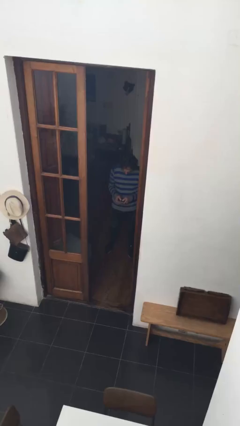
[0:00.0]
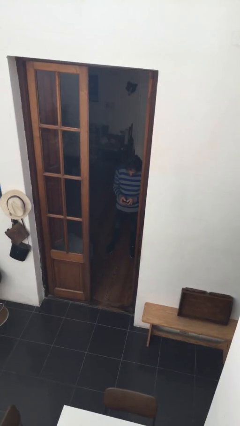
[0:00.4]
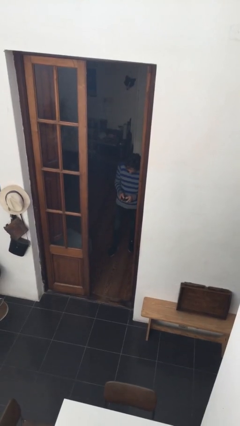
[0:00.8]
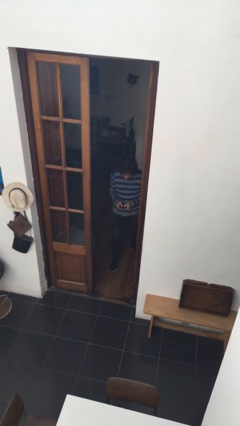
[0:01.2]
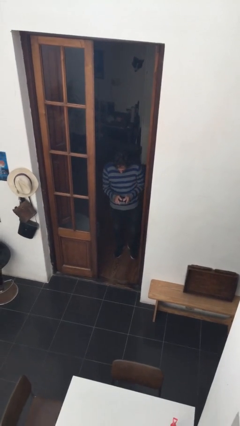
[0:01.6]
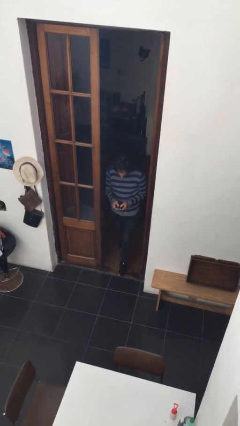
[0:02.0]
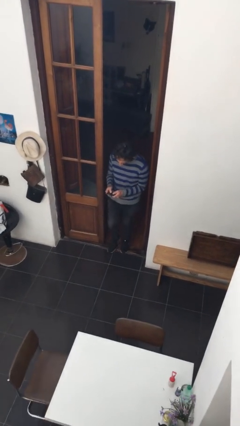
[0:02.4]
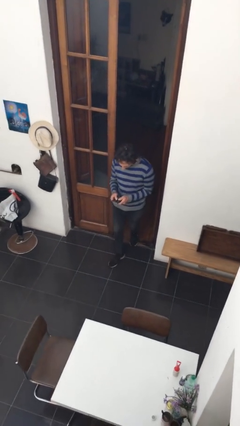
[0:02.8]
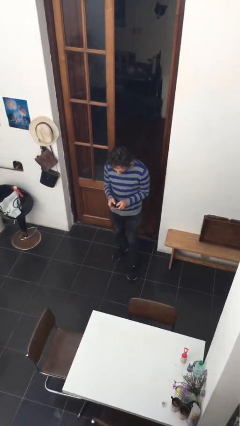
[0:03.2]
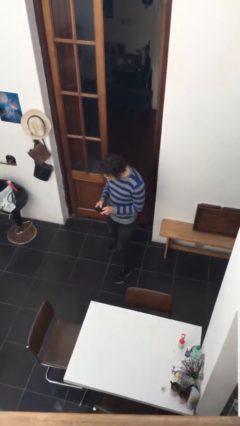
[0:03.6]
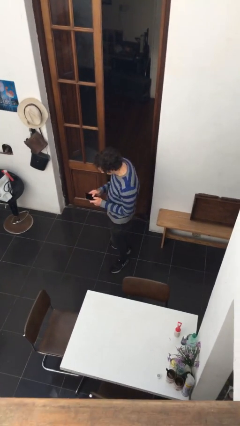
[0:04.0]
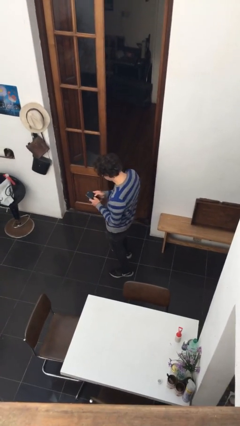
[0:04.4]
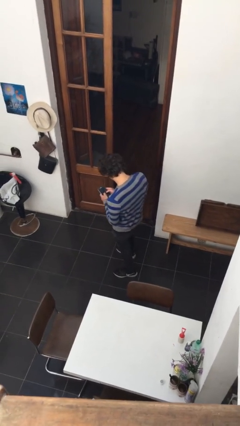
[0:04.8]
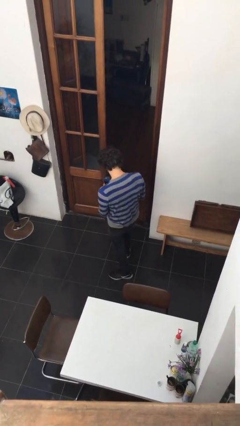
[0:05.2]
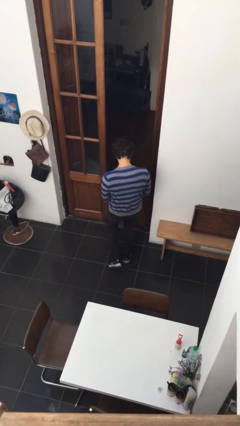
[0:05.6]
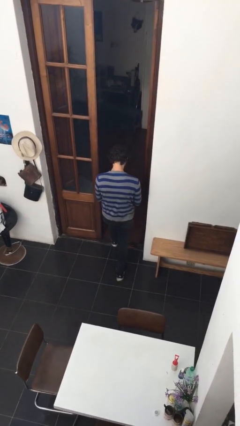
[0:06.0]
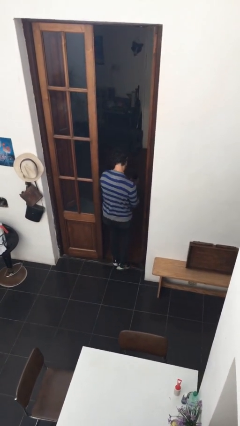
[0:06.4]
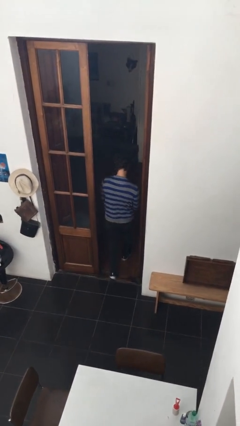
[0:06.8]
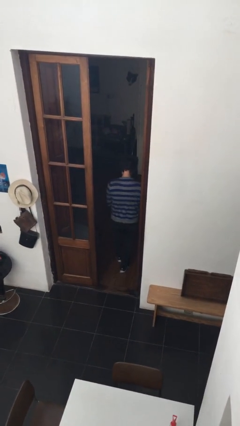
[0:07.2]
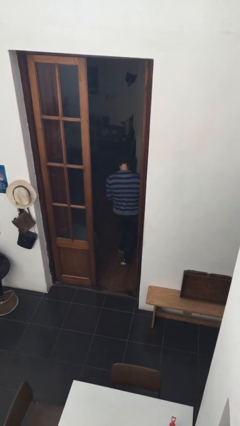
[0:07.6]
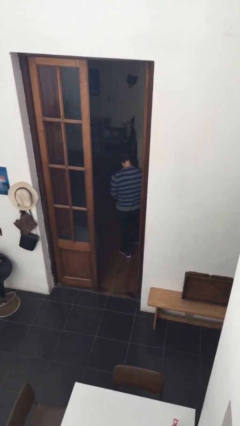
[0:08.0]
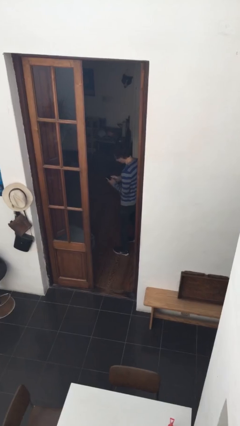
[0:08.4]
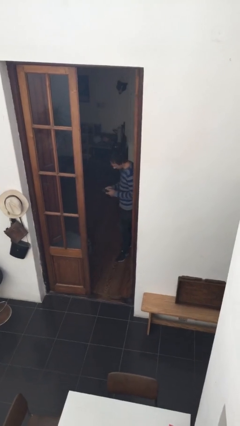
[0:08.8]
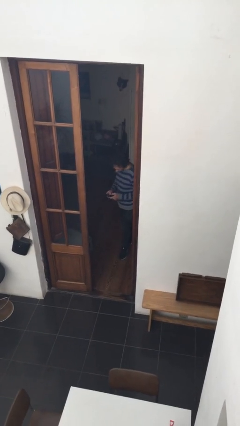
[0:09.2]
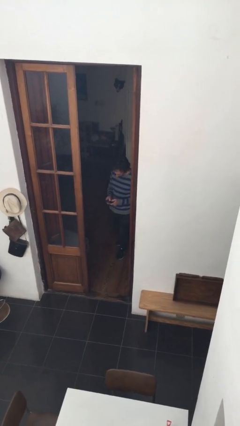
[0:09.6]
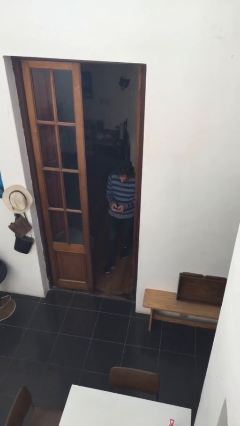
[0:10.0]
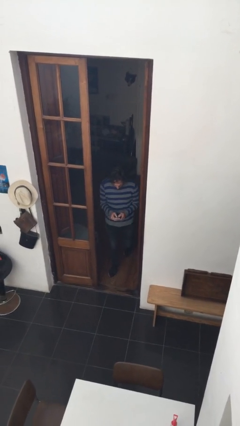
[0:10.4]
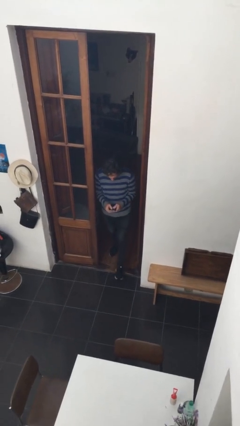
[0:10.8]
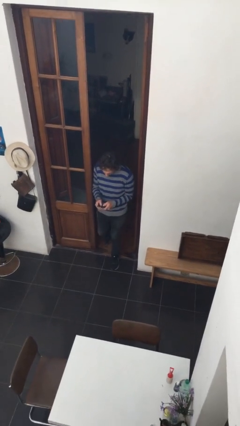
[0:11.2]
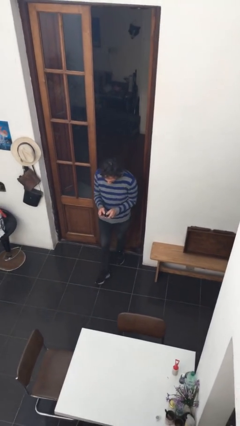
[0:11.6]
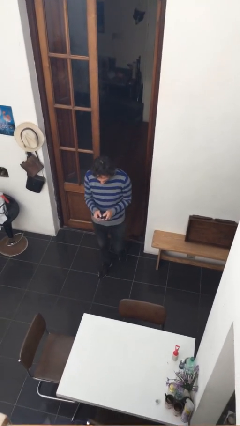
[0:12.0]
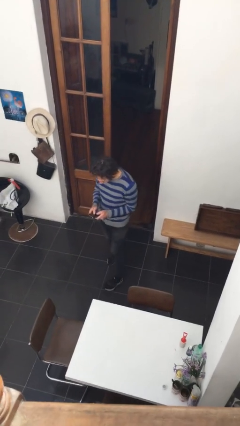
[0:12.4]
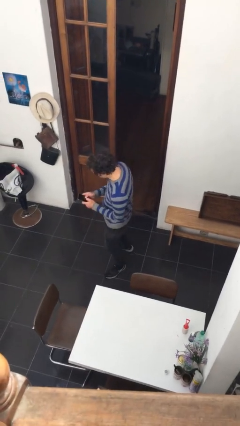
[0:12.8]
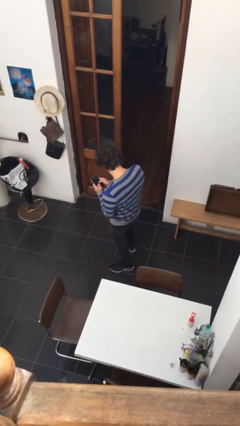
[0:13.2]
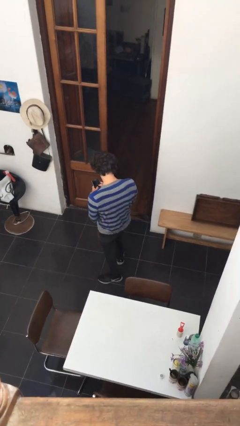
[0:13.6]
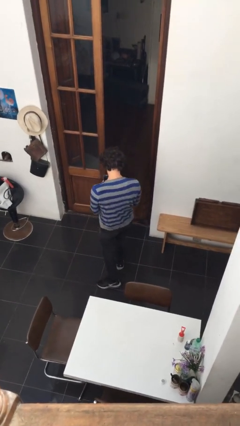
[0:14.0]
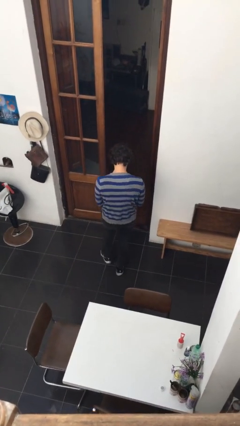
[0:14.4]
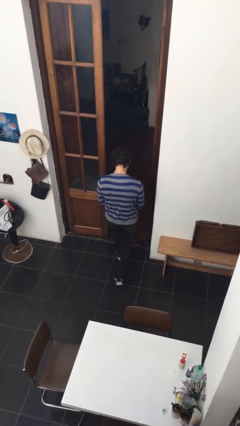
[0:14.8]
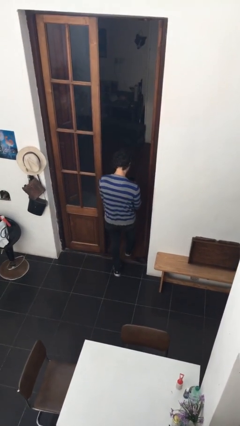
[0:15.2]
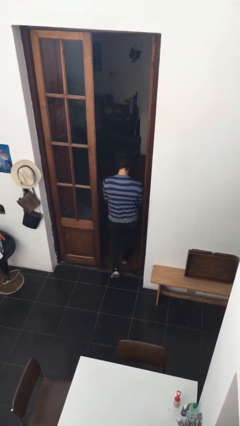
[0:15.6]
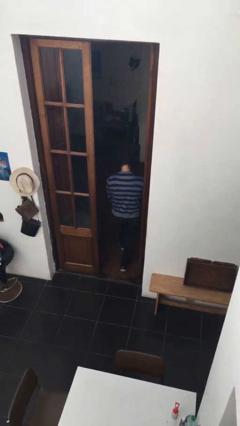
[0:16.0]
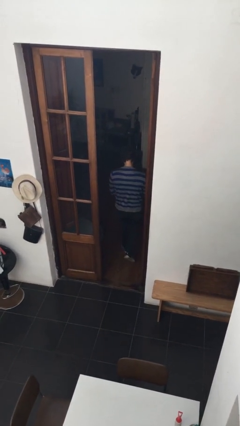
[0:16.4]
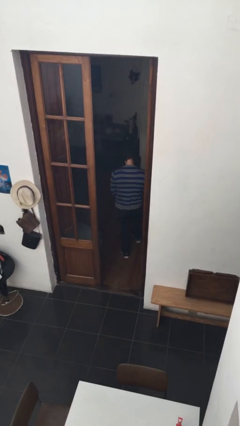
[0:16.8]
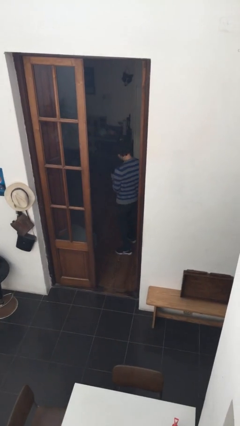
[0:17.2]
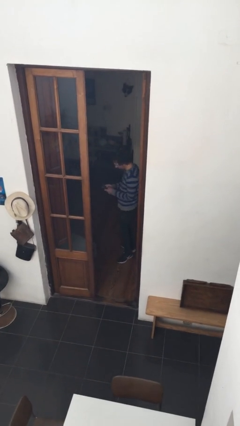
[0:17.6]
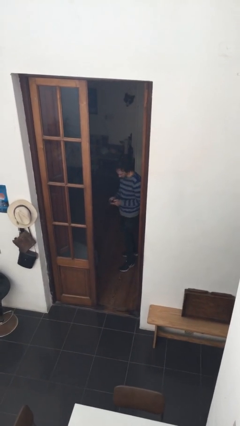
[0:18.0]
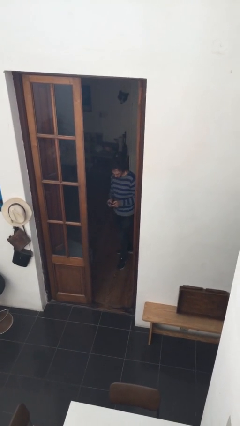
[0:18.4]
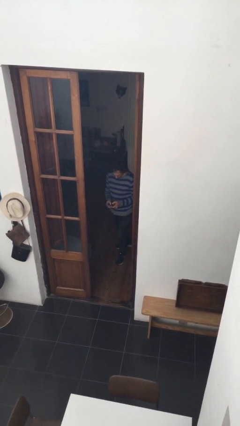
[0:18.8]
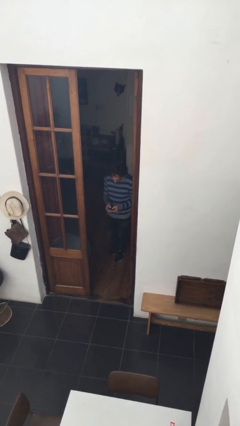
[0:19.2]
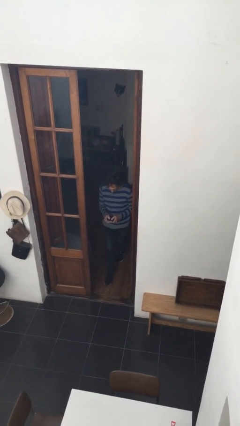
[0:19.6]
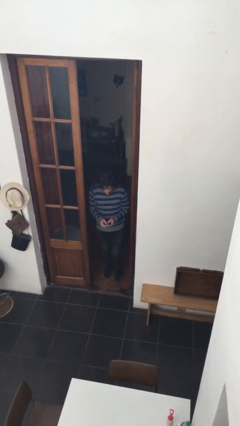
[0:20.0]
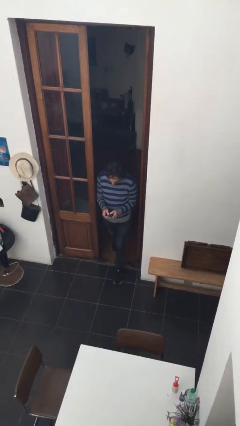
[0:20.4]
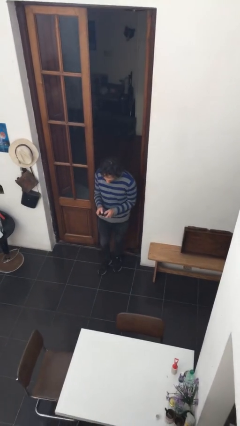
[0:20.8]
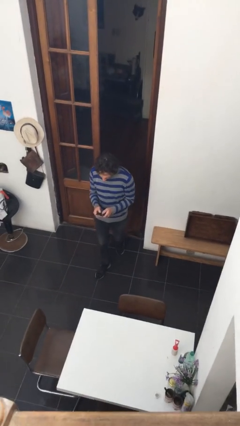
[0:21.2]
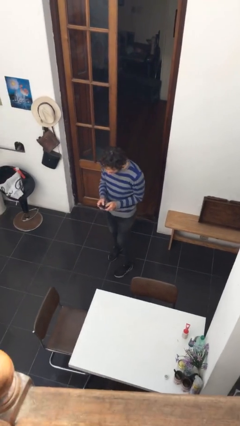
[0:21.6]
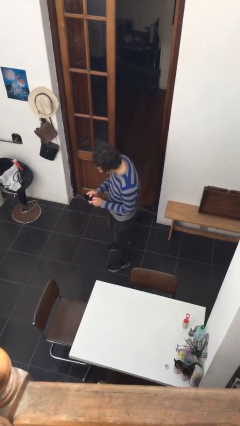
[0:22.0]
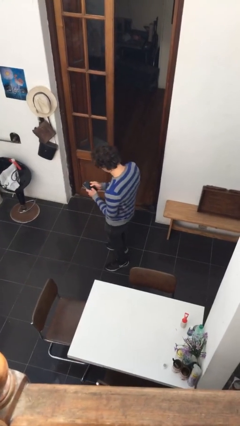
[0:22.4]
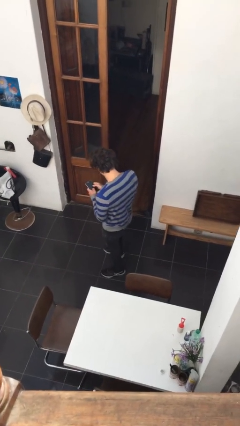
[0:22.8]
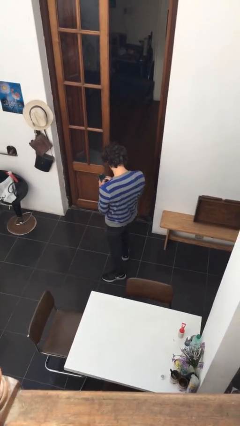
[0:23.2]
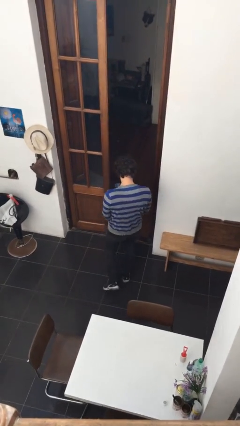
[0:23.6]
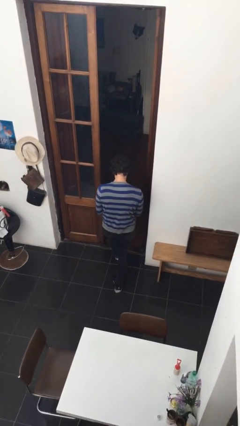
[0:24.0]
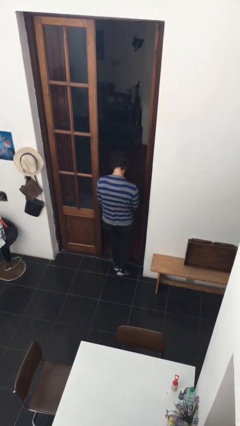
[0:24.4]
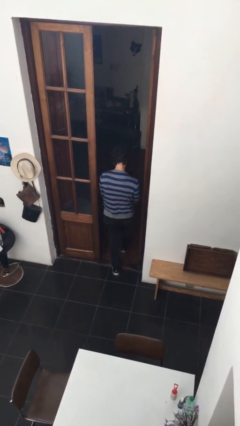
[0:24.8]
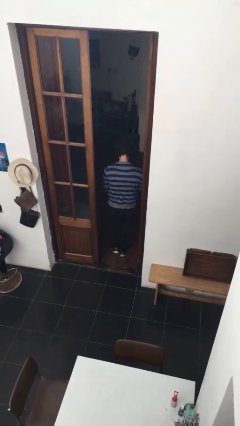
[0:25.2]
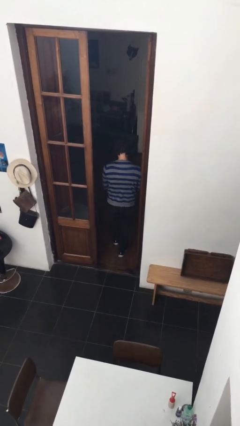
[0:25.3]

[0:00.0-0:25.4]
person texts on phone

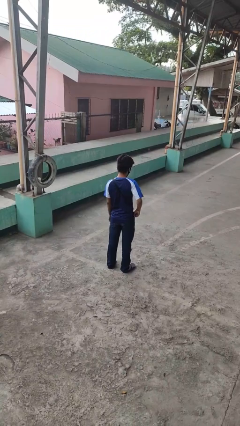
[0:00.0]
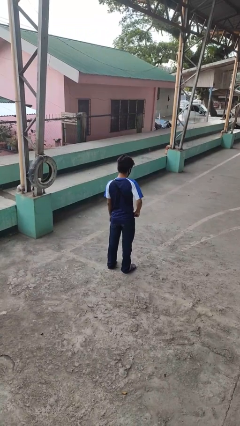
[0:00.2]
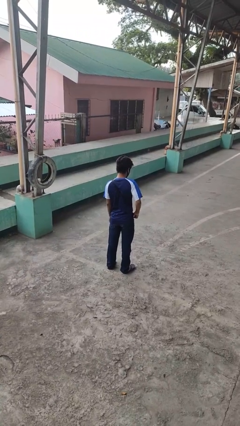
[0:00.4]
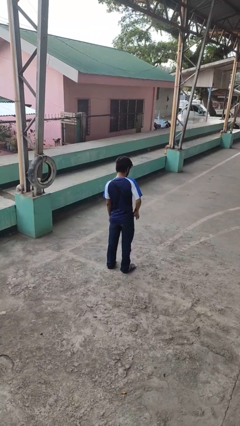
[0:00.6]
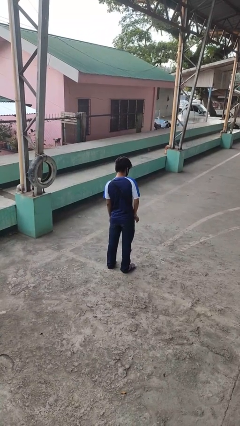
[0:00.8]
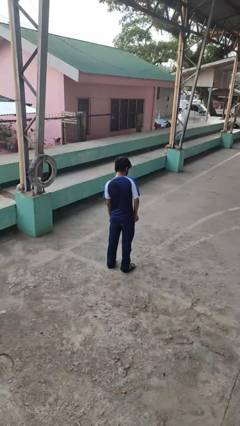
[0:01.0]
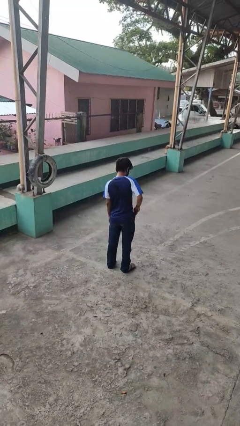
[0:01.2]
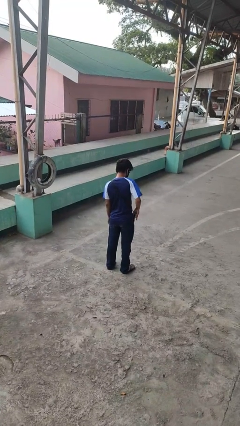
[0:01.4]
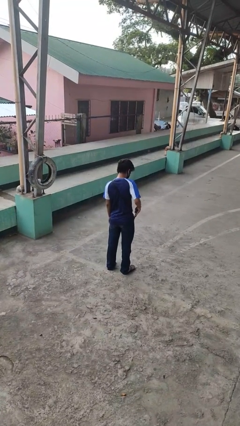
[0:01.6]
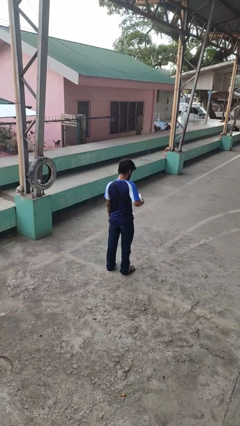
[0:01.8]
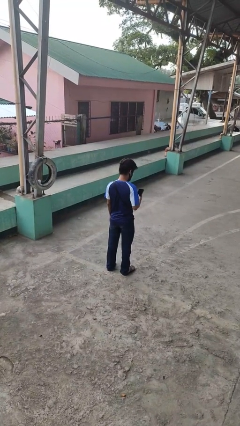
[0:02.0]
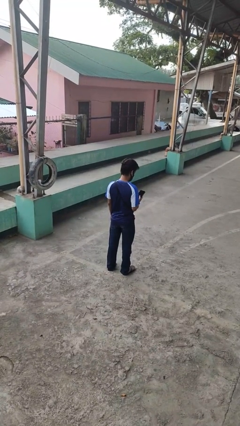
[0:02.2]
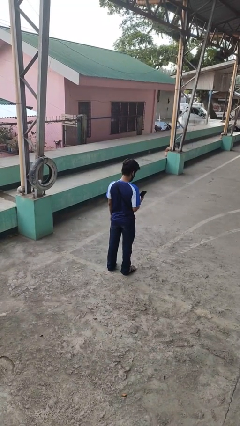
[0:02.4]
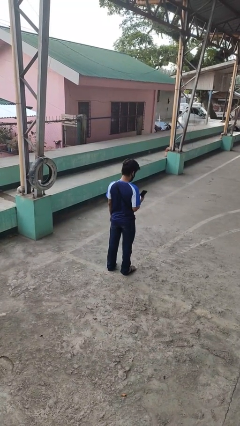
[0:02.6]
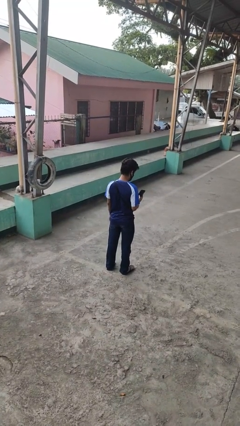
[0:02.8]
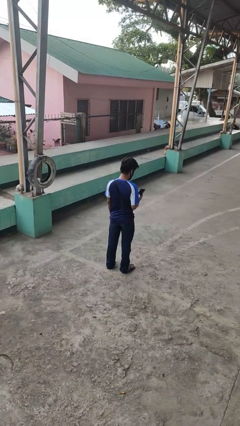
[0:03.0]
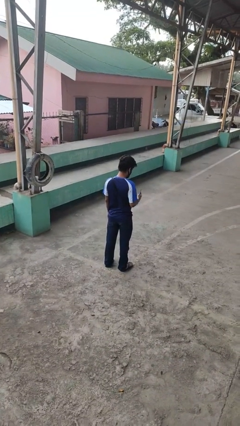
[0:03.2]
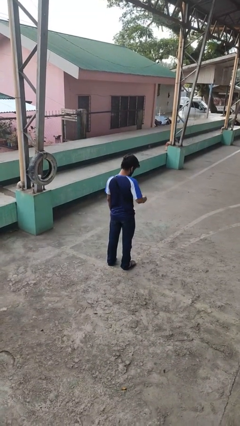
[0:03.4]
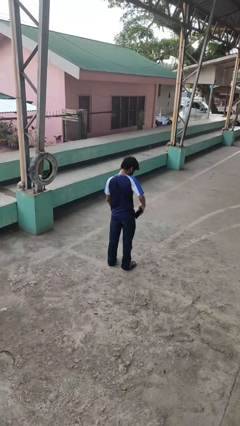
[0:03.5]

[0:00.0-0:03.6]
person takes phone from pocket

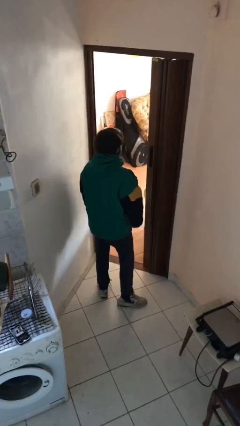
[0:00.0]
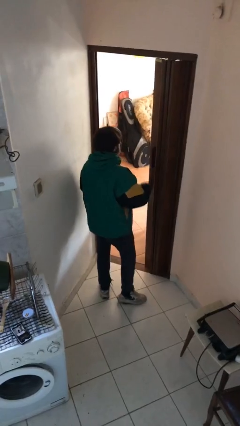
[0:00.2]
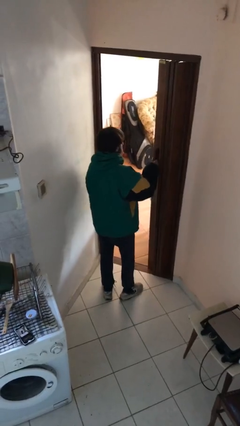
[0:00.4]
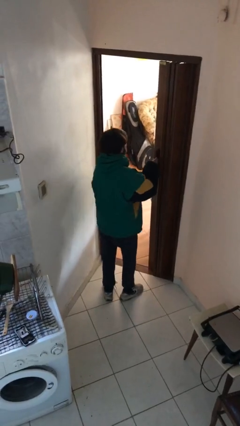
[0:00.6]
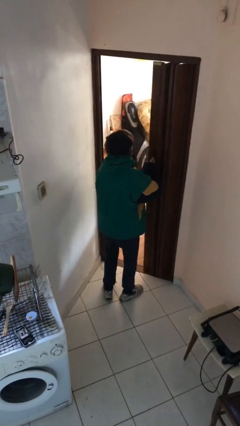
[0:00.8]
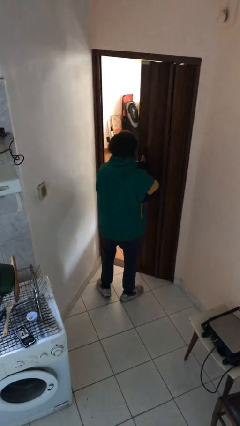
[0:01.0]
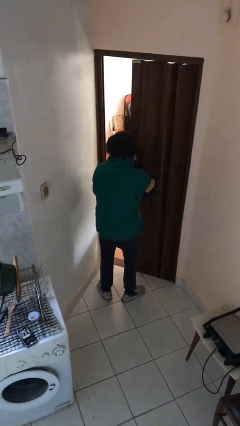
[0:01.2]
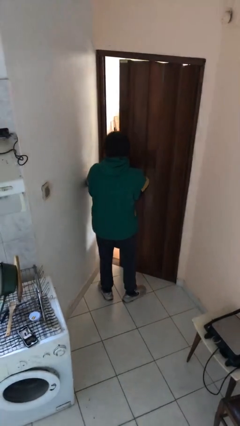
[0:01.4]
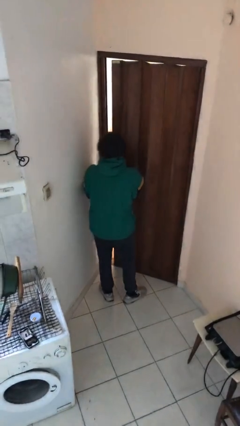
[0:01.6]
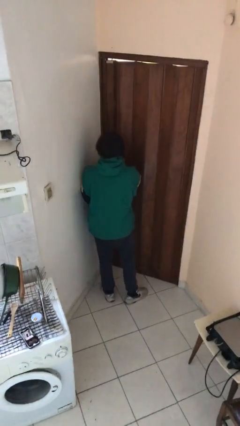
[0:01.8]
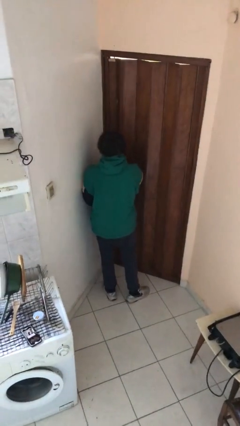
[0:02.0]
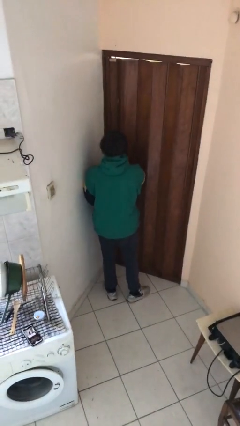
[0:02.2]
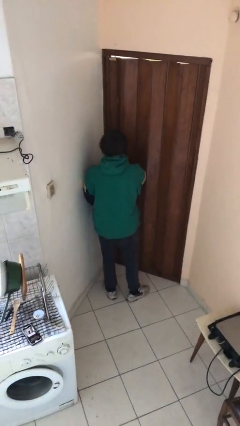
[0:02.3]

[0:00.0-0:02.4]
person closes sliding door
